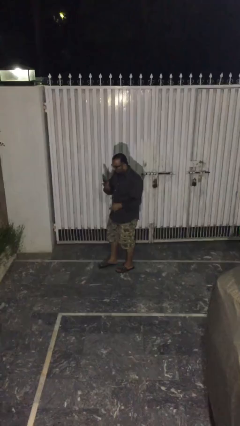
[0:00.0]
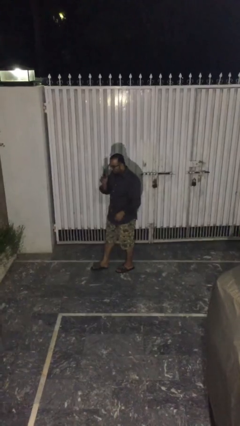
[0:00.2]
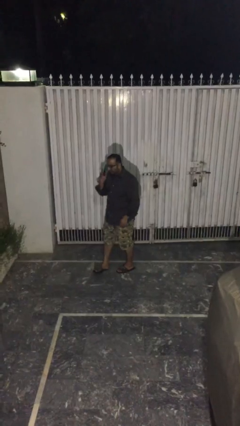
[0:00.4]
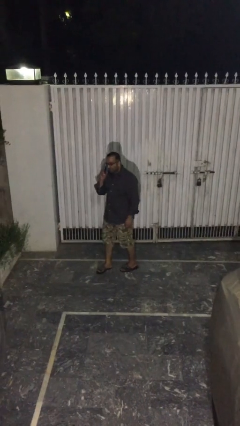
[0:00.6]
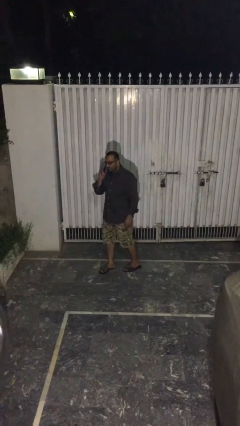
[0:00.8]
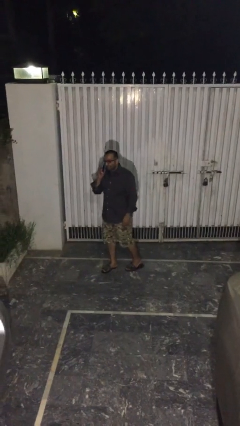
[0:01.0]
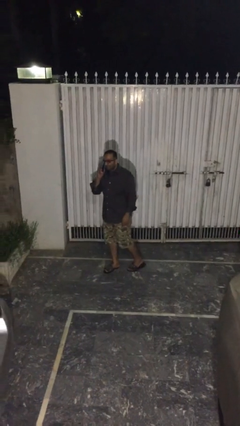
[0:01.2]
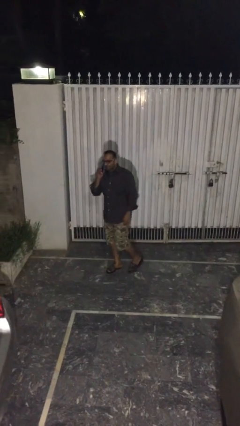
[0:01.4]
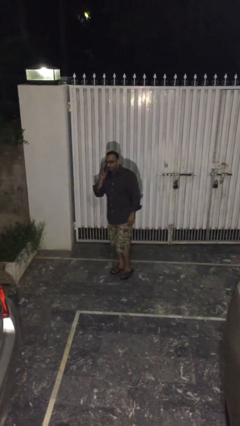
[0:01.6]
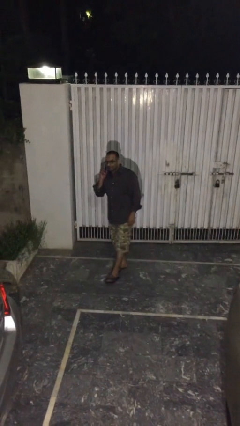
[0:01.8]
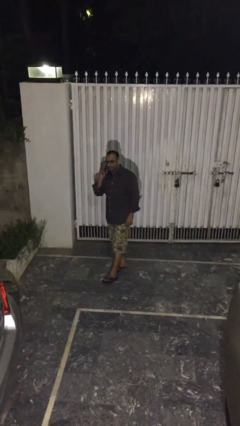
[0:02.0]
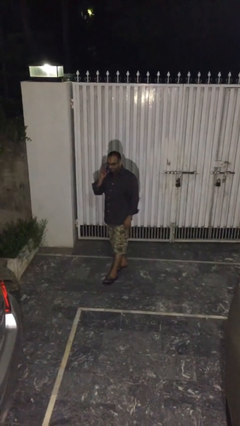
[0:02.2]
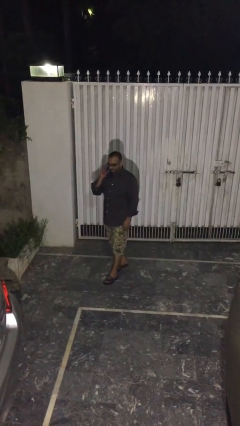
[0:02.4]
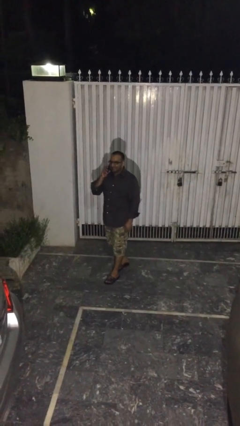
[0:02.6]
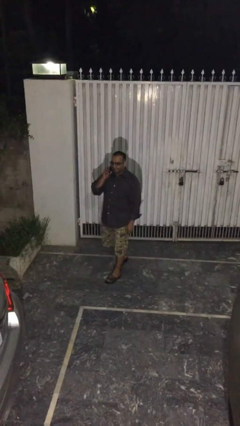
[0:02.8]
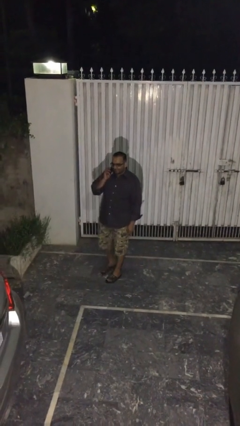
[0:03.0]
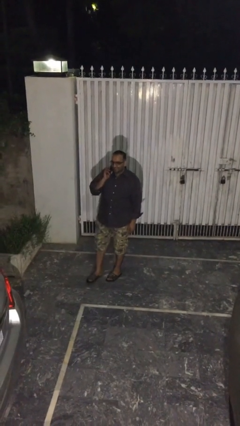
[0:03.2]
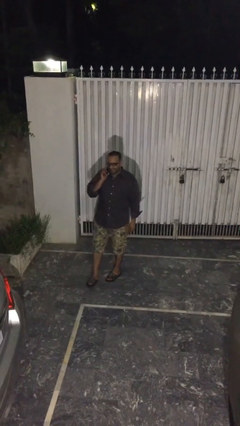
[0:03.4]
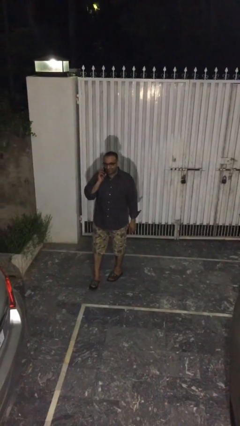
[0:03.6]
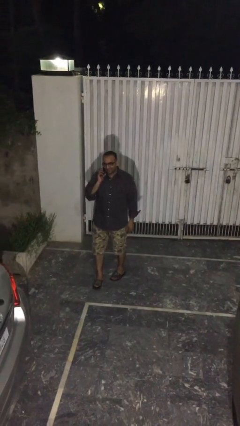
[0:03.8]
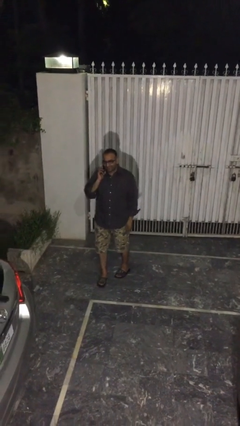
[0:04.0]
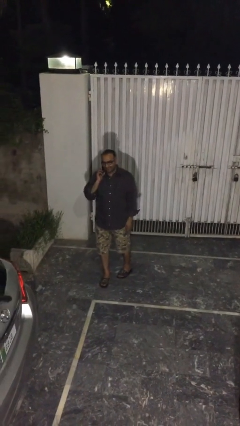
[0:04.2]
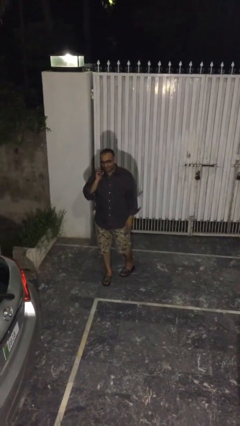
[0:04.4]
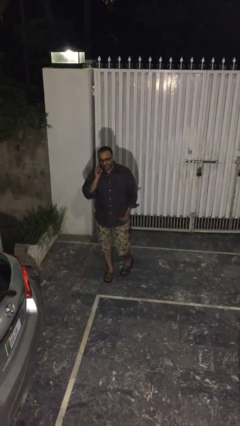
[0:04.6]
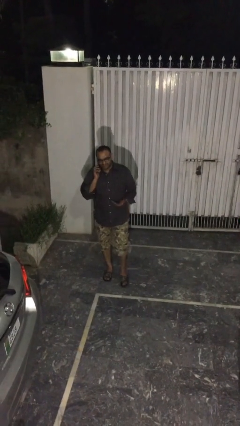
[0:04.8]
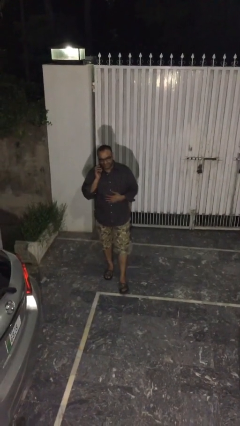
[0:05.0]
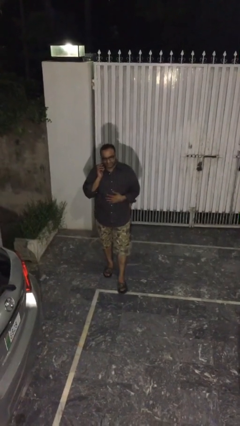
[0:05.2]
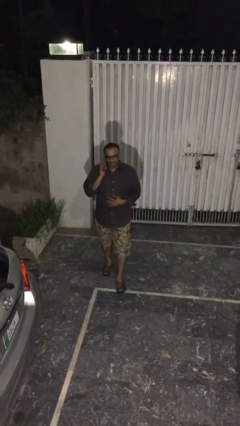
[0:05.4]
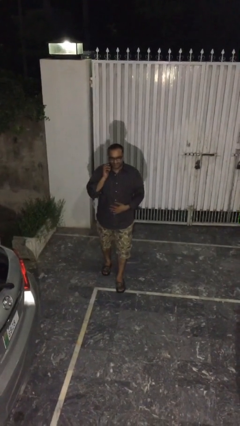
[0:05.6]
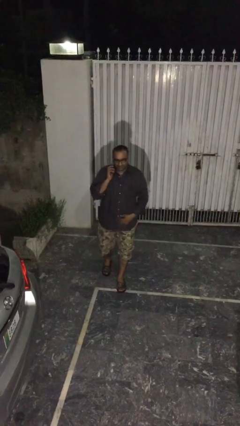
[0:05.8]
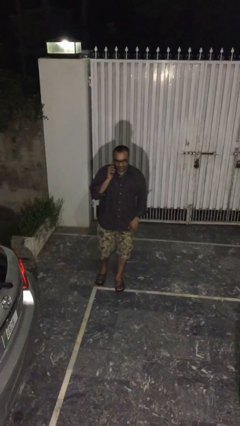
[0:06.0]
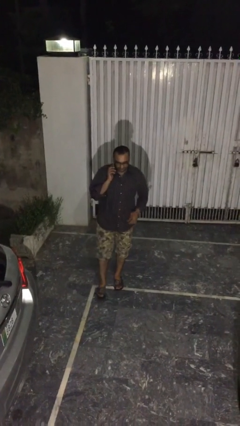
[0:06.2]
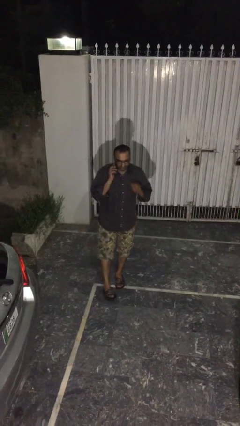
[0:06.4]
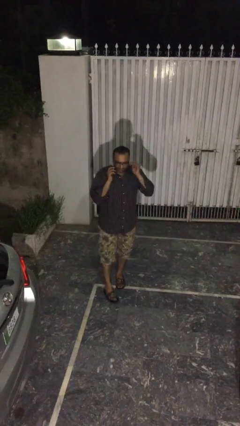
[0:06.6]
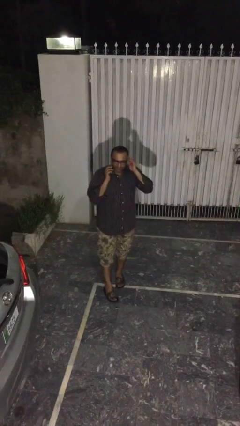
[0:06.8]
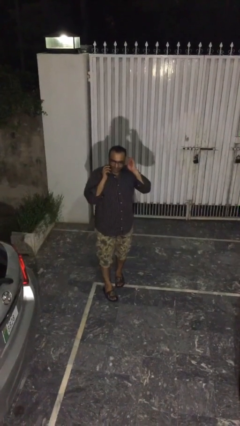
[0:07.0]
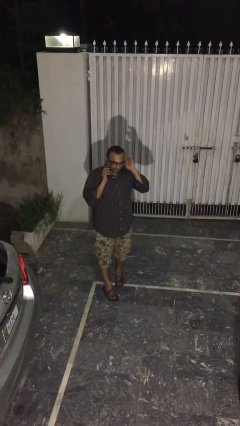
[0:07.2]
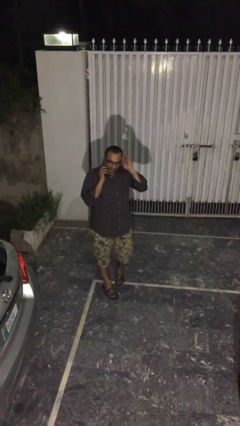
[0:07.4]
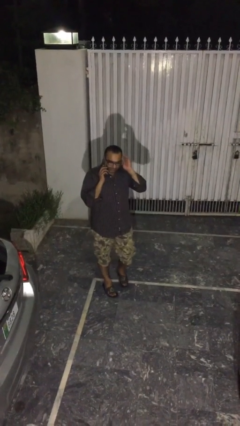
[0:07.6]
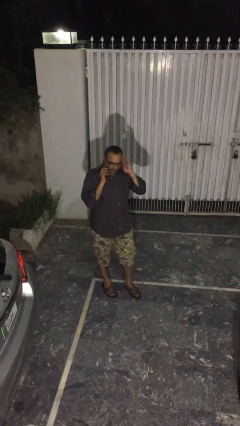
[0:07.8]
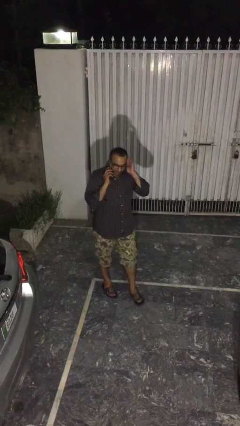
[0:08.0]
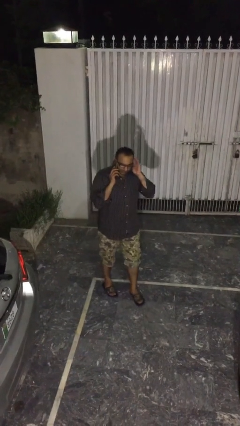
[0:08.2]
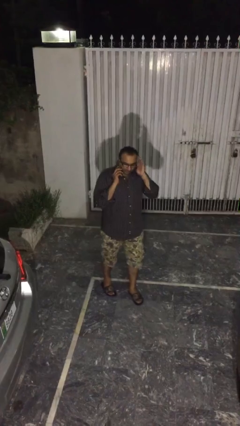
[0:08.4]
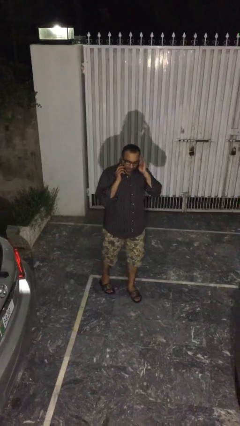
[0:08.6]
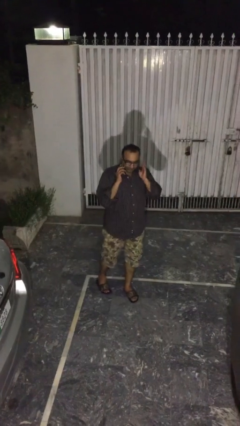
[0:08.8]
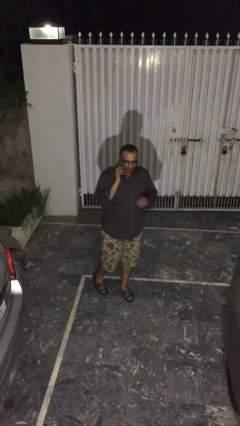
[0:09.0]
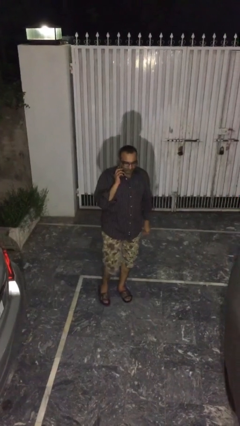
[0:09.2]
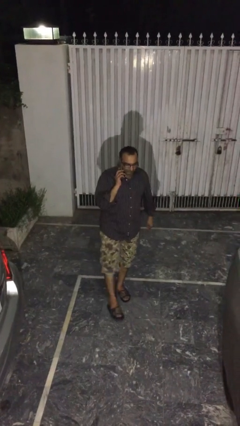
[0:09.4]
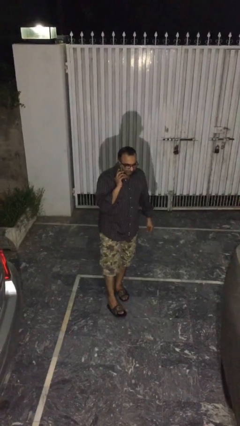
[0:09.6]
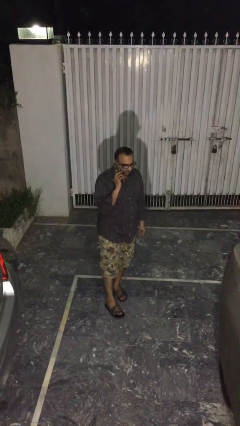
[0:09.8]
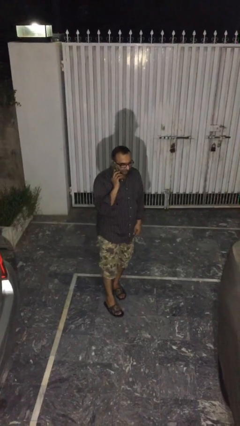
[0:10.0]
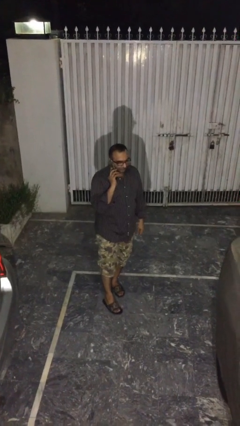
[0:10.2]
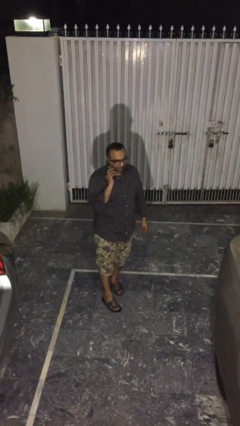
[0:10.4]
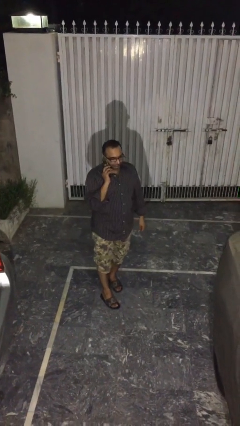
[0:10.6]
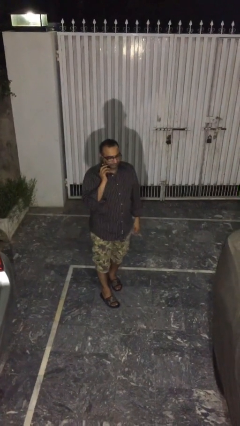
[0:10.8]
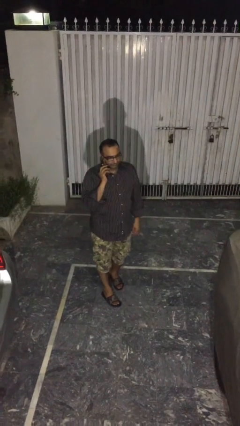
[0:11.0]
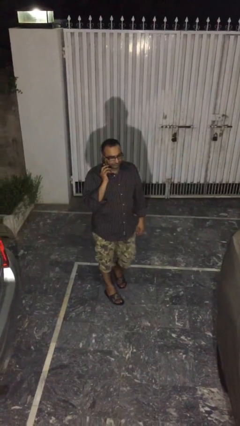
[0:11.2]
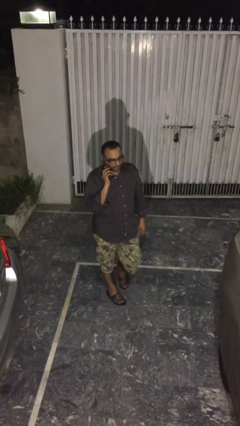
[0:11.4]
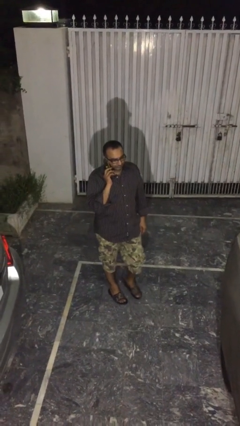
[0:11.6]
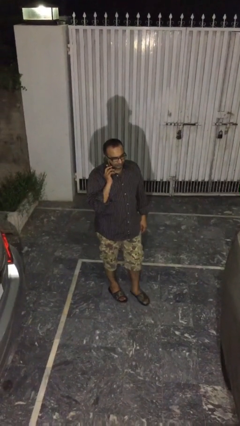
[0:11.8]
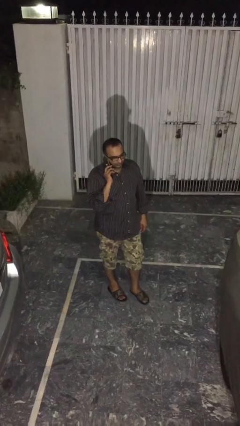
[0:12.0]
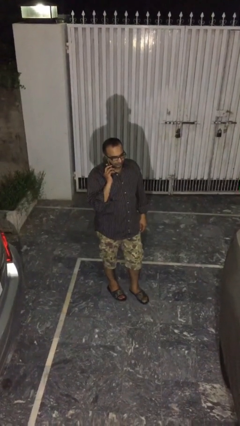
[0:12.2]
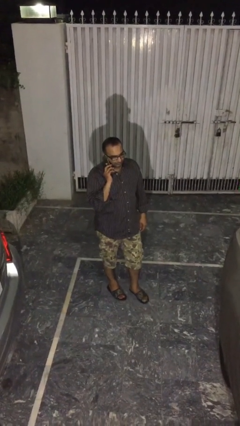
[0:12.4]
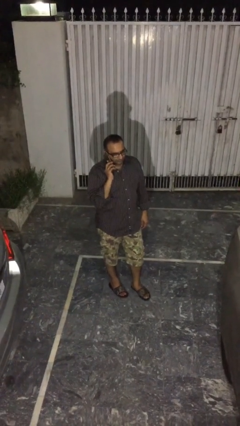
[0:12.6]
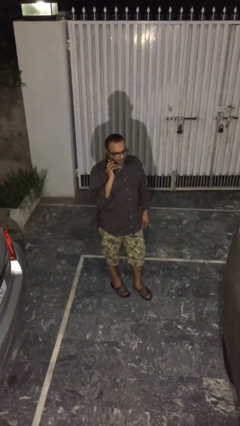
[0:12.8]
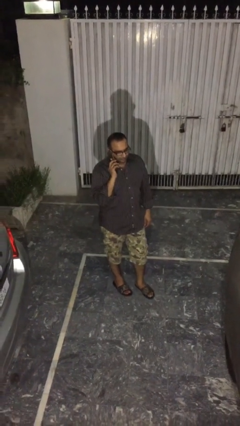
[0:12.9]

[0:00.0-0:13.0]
person talks on phone

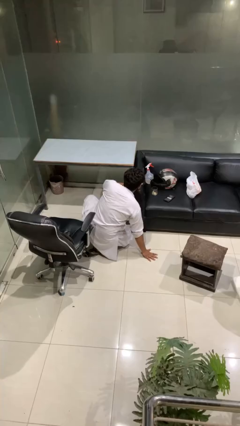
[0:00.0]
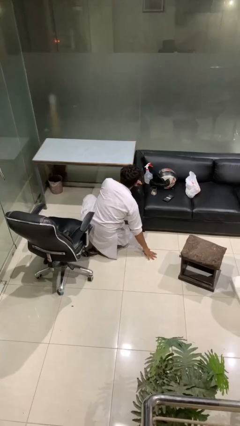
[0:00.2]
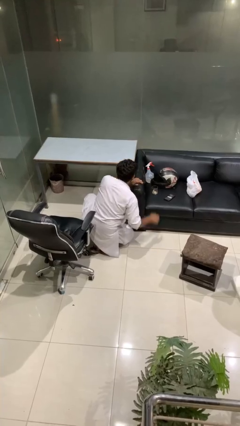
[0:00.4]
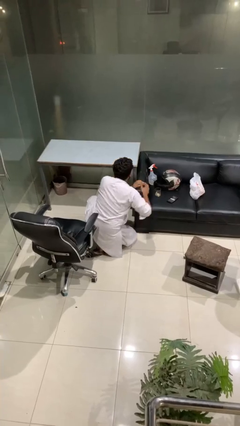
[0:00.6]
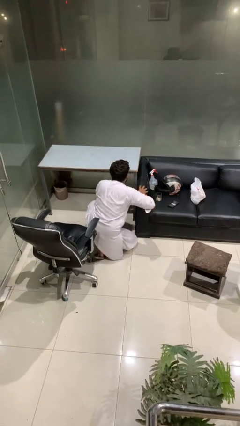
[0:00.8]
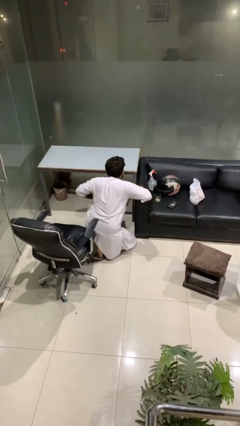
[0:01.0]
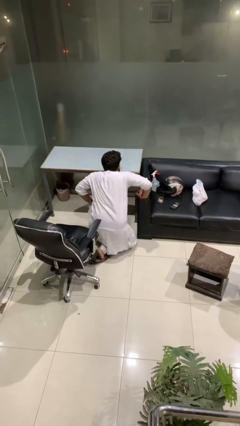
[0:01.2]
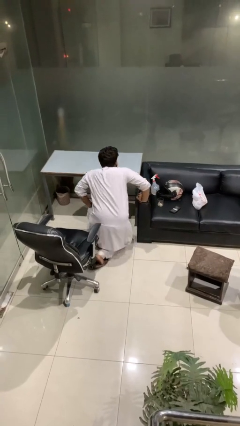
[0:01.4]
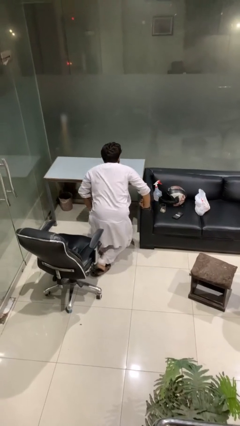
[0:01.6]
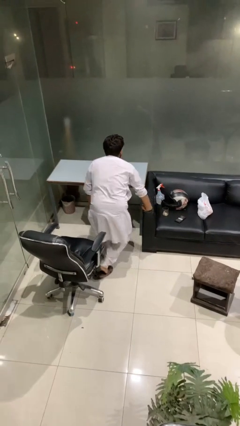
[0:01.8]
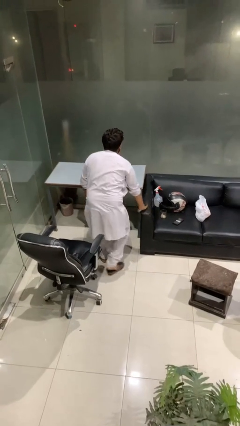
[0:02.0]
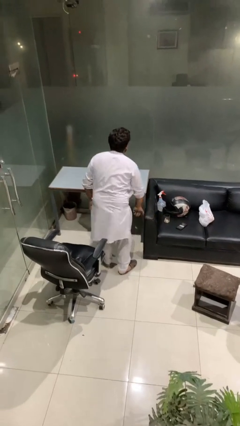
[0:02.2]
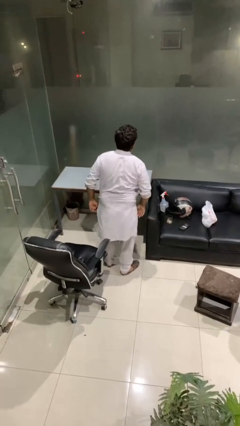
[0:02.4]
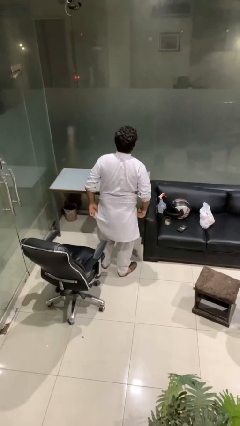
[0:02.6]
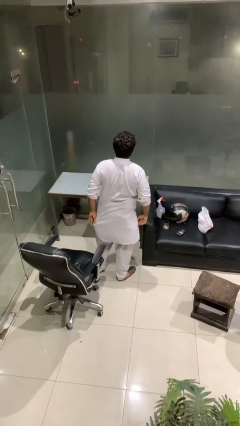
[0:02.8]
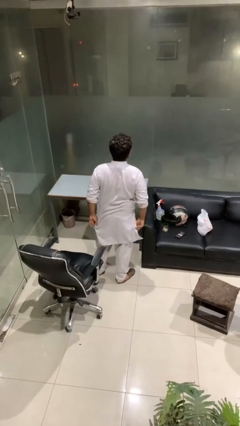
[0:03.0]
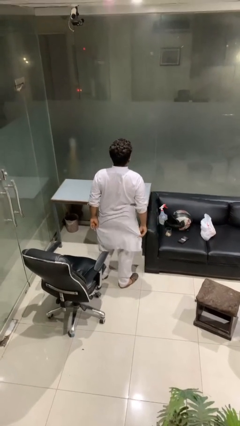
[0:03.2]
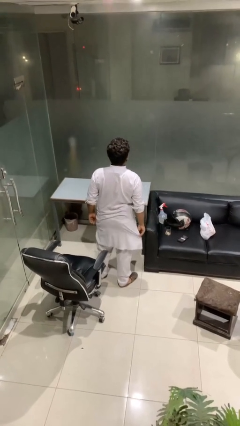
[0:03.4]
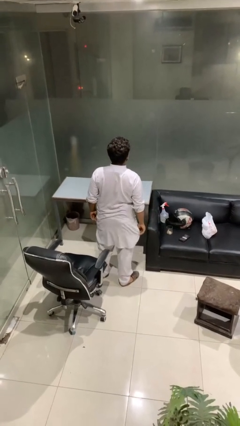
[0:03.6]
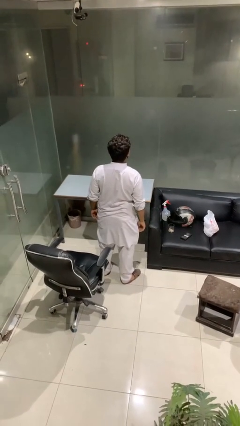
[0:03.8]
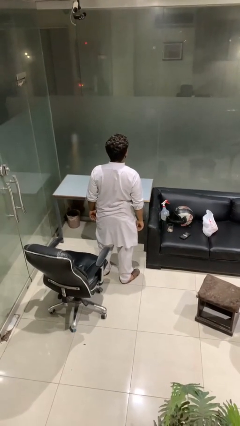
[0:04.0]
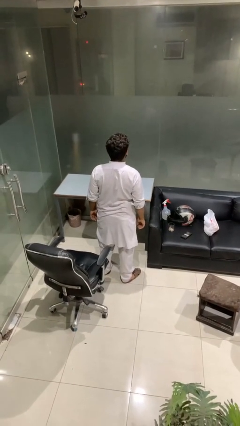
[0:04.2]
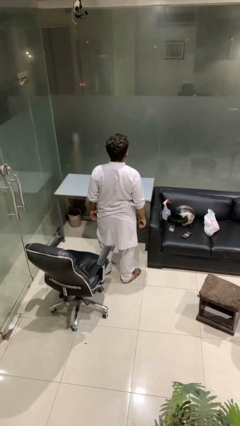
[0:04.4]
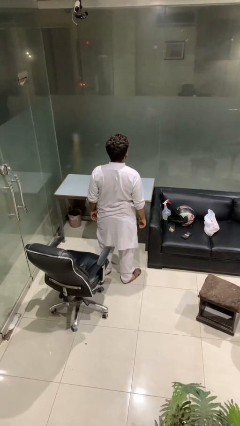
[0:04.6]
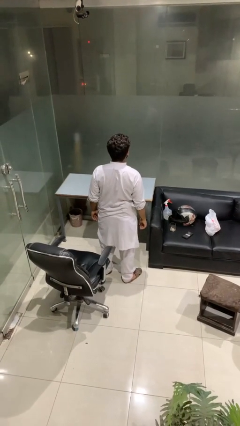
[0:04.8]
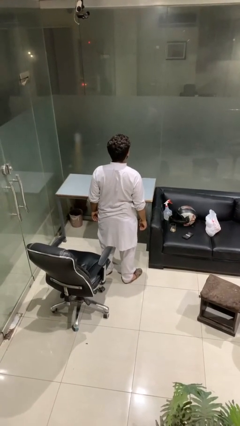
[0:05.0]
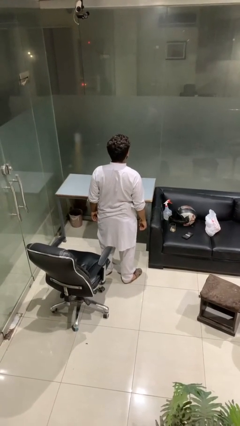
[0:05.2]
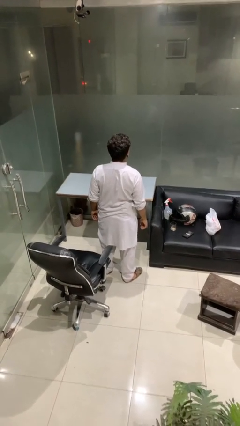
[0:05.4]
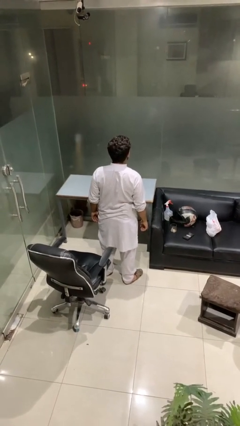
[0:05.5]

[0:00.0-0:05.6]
person stands up from floor
